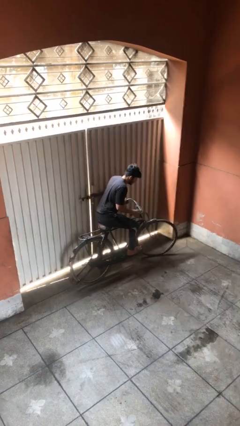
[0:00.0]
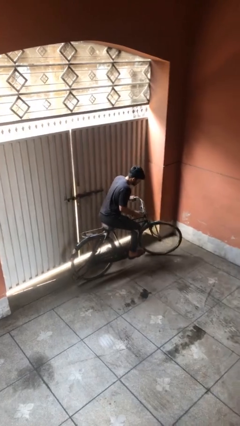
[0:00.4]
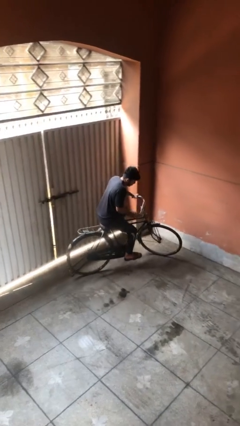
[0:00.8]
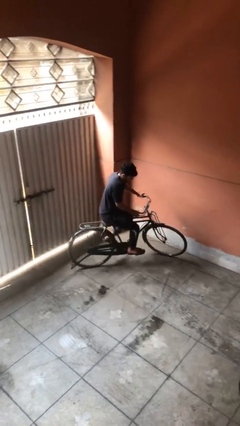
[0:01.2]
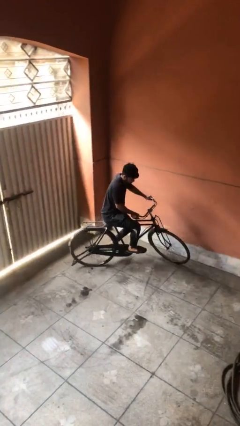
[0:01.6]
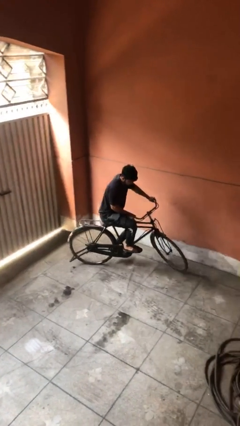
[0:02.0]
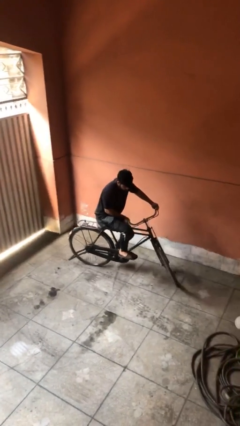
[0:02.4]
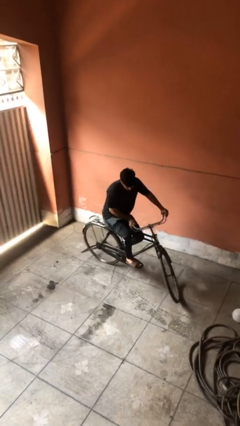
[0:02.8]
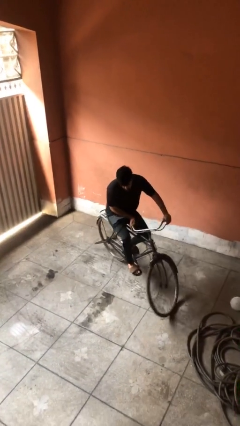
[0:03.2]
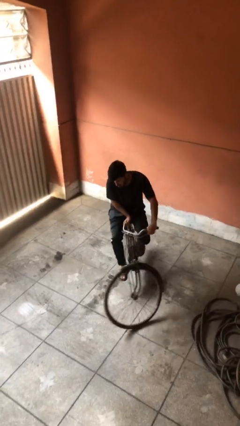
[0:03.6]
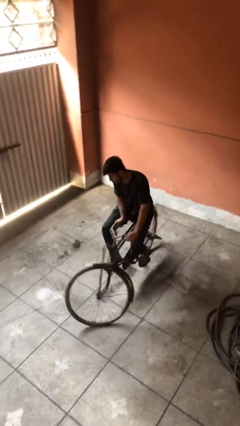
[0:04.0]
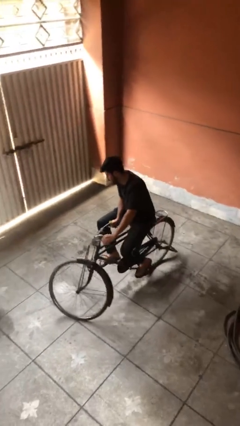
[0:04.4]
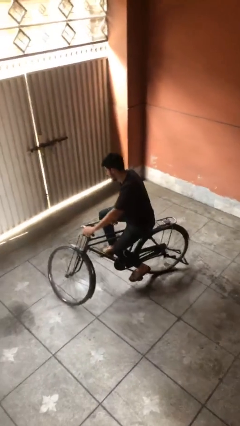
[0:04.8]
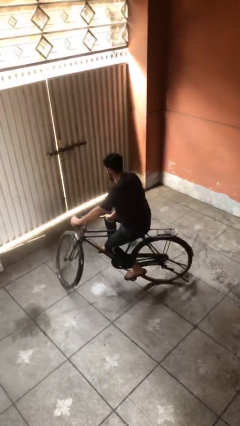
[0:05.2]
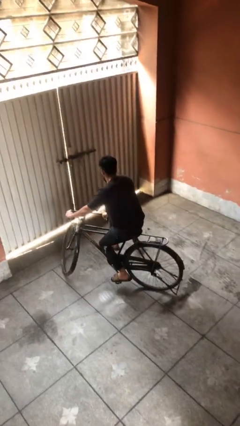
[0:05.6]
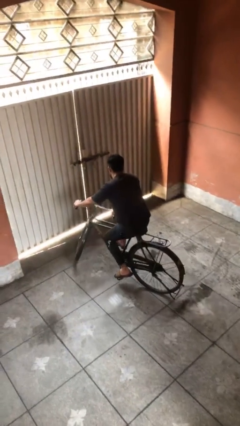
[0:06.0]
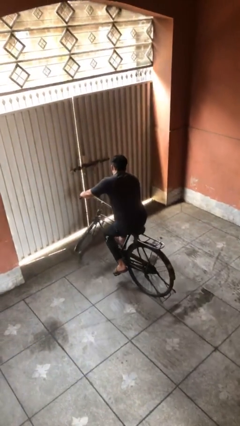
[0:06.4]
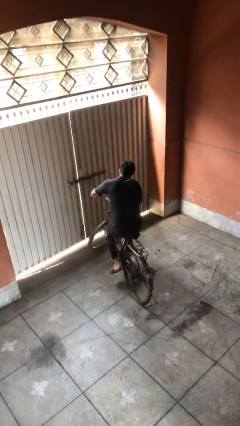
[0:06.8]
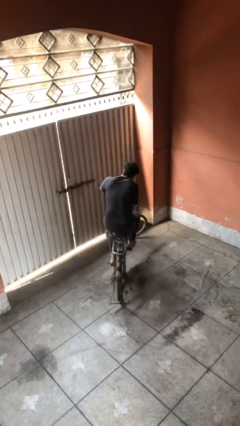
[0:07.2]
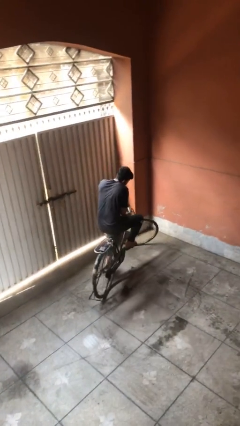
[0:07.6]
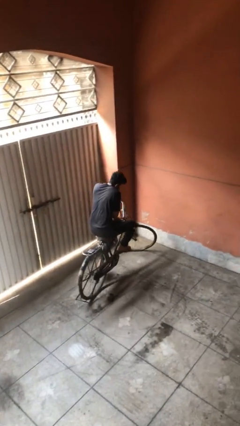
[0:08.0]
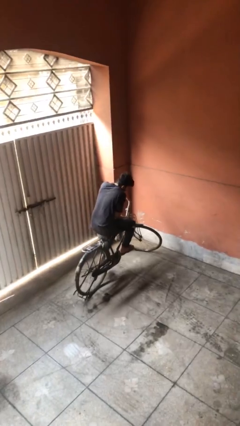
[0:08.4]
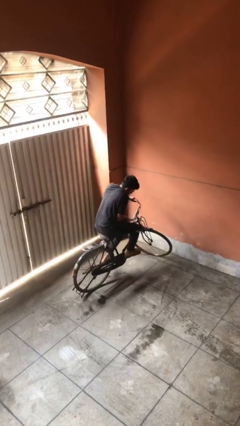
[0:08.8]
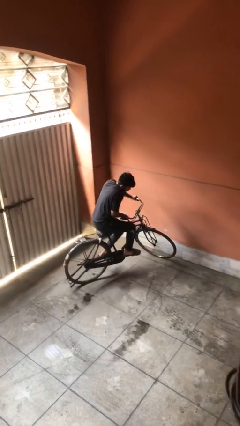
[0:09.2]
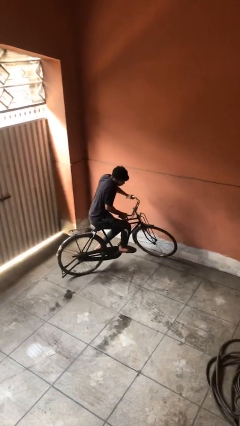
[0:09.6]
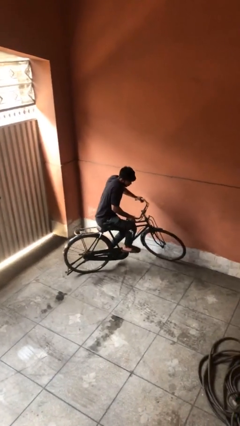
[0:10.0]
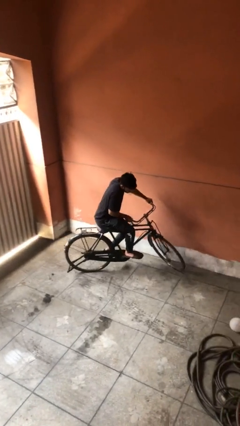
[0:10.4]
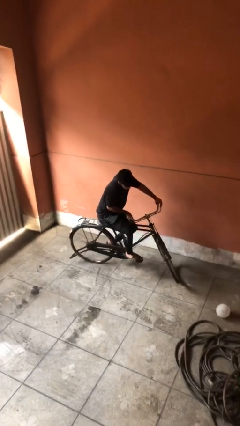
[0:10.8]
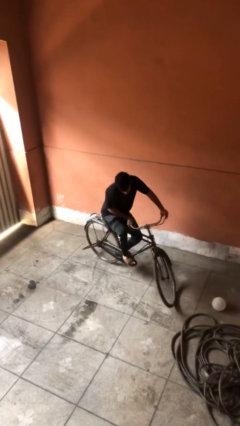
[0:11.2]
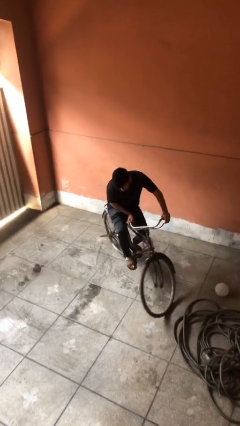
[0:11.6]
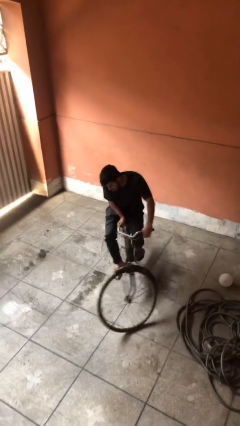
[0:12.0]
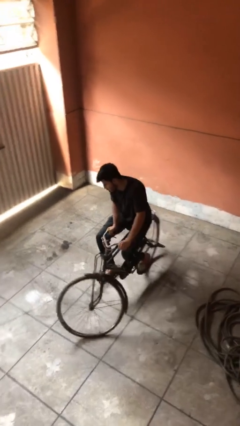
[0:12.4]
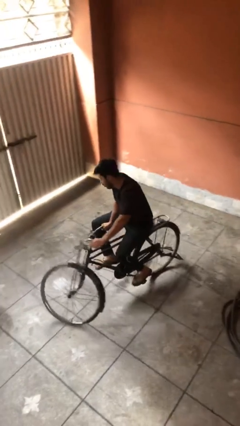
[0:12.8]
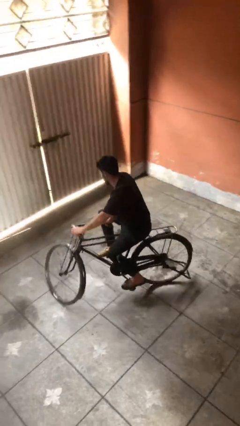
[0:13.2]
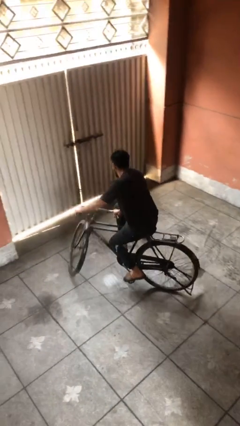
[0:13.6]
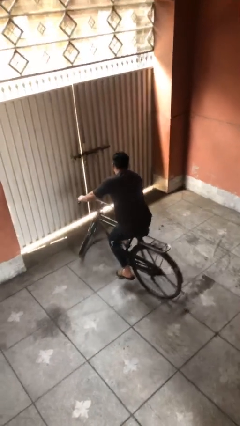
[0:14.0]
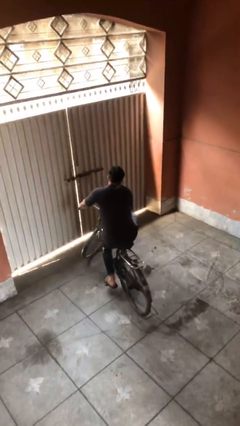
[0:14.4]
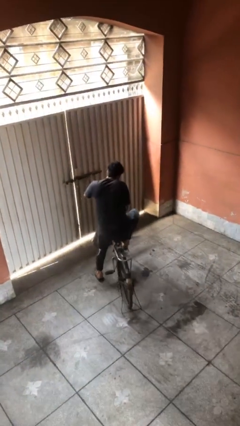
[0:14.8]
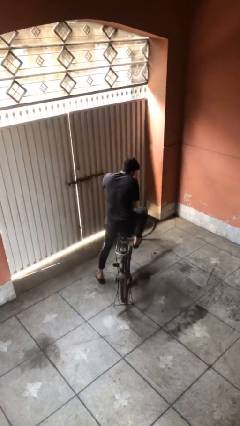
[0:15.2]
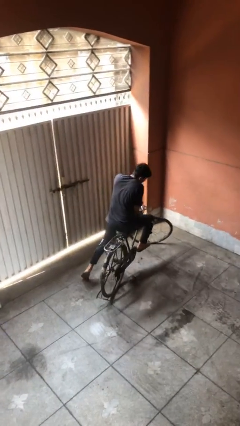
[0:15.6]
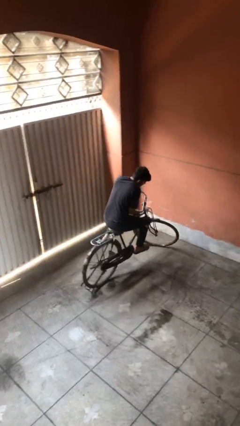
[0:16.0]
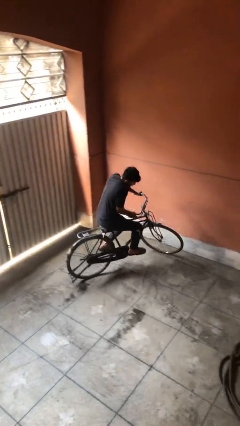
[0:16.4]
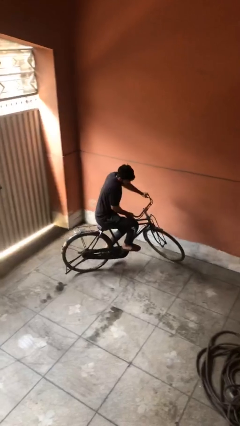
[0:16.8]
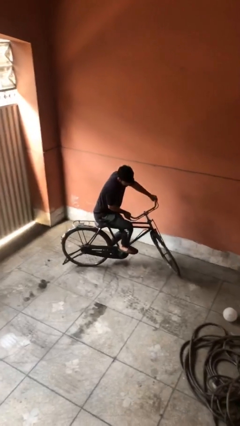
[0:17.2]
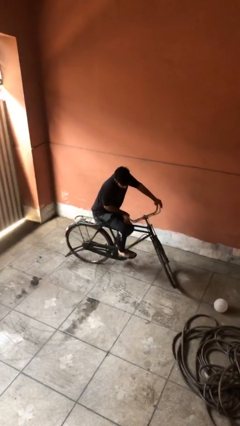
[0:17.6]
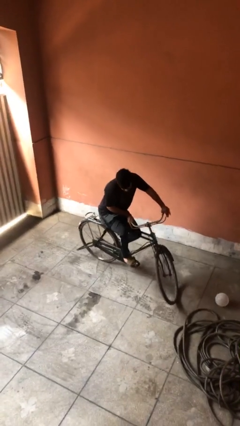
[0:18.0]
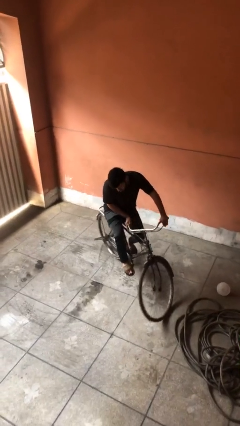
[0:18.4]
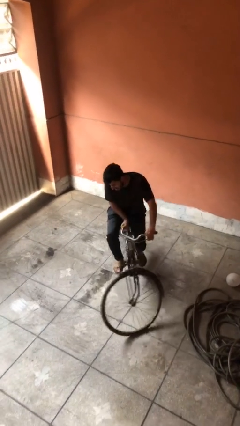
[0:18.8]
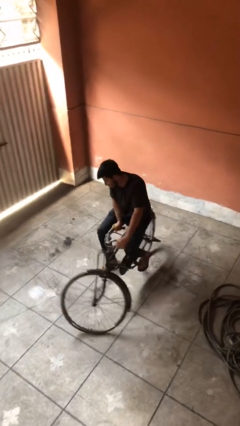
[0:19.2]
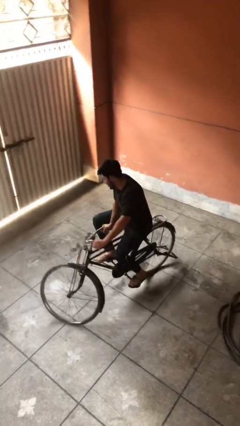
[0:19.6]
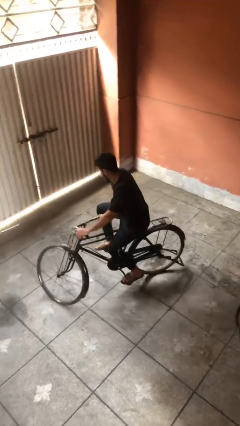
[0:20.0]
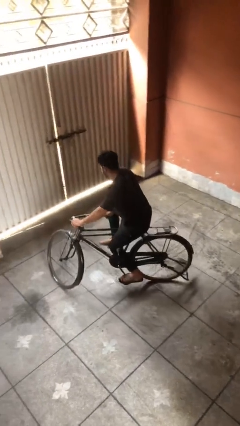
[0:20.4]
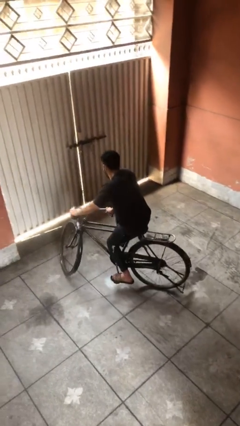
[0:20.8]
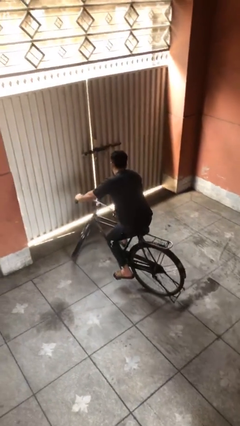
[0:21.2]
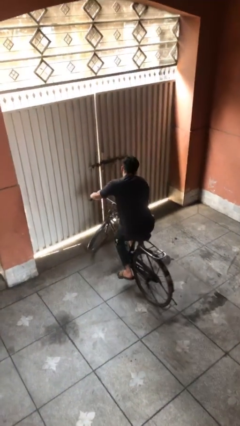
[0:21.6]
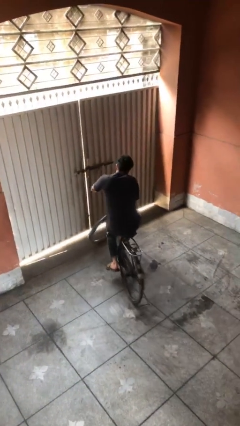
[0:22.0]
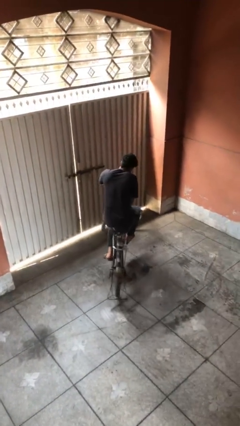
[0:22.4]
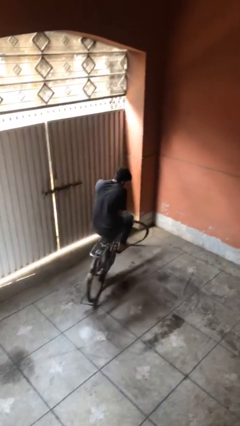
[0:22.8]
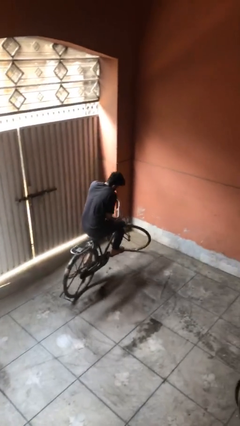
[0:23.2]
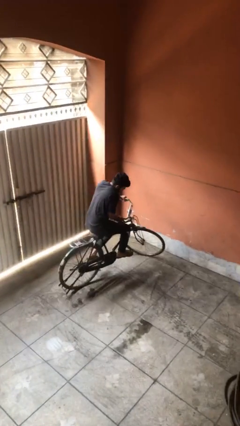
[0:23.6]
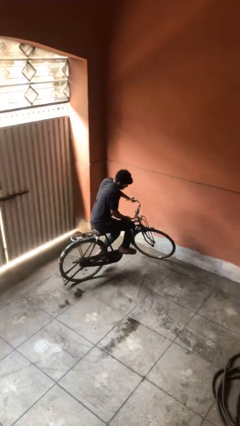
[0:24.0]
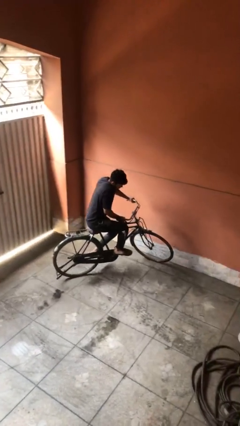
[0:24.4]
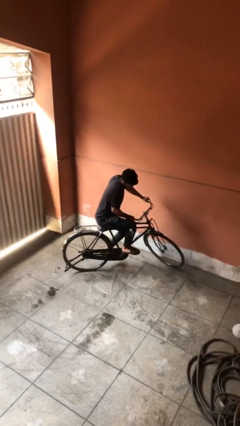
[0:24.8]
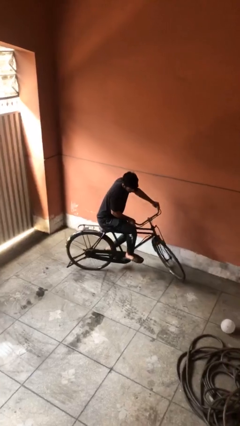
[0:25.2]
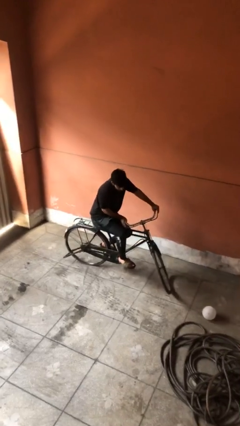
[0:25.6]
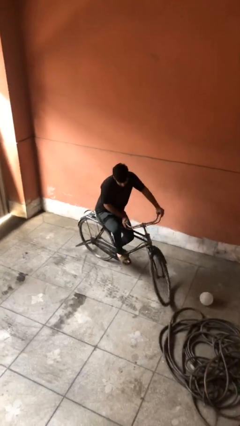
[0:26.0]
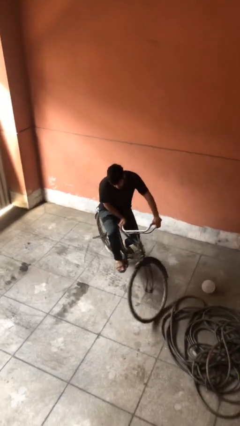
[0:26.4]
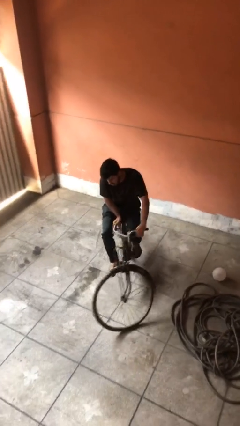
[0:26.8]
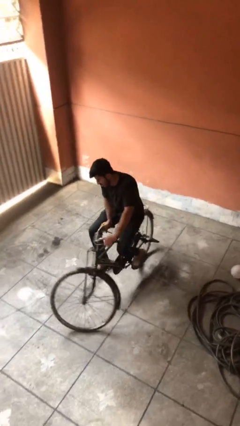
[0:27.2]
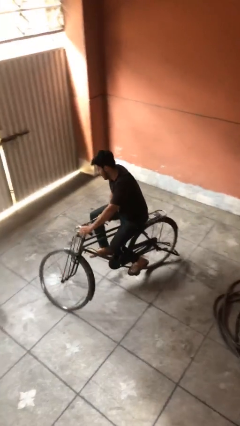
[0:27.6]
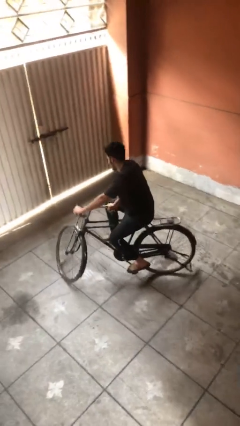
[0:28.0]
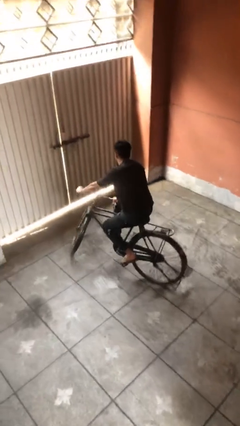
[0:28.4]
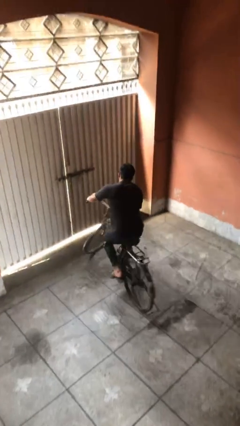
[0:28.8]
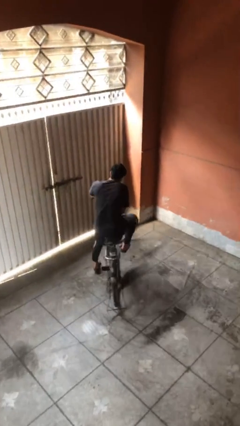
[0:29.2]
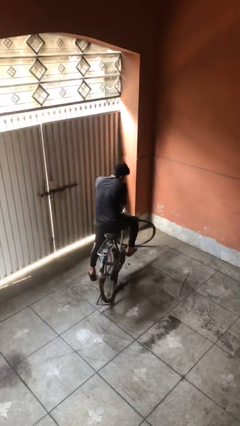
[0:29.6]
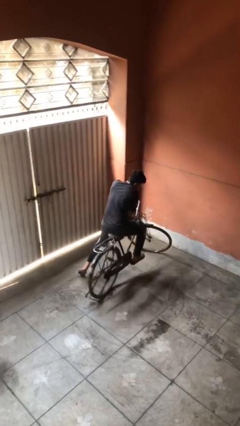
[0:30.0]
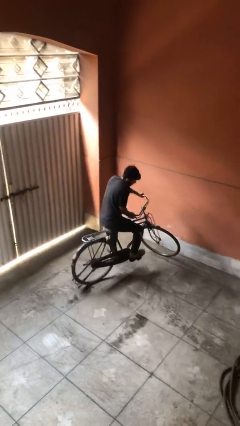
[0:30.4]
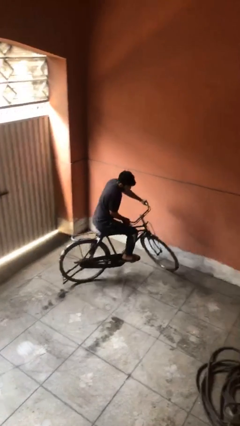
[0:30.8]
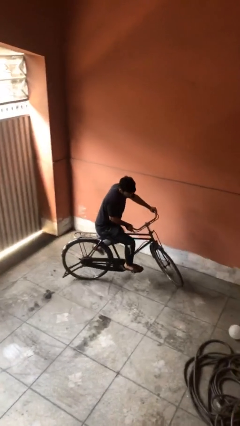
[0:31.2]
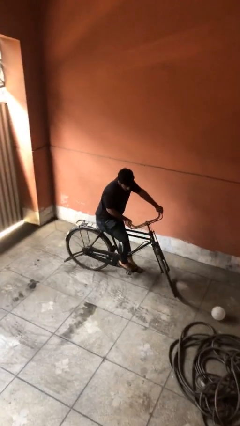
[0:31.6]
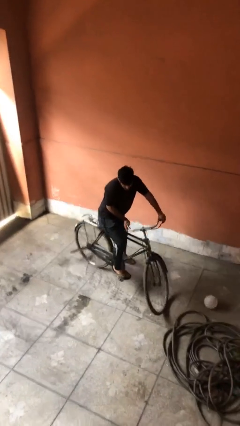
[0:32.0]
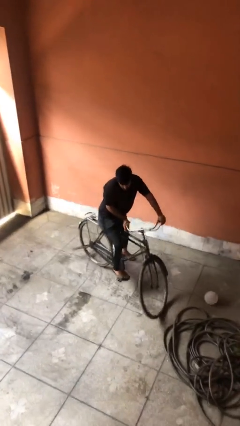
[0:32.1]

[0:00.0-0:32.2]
person rides bicycle

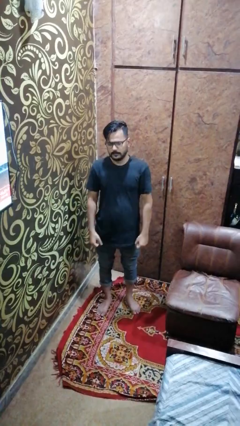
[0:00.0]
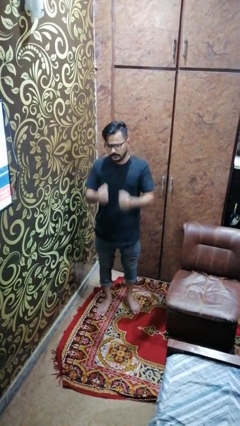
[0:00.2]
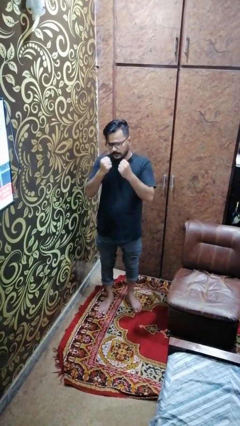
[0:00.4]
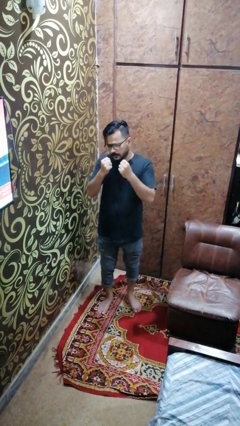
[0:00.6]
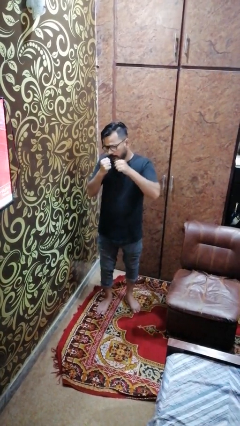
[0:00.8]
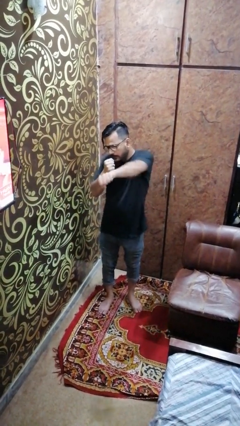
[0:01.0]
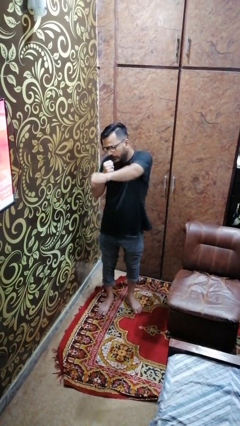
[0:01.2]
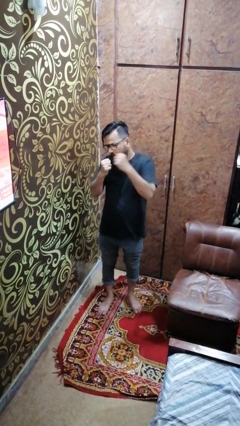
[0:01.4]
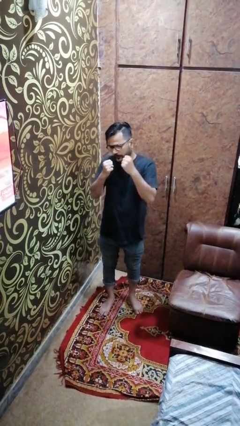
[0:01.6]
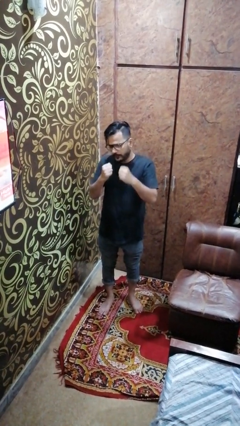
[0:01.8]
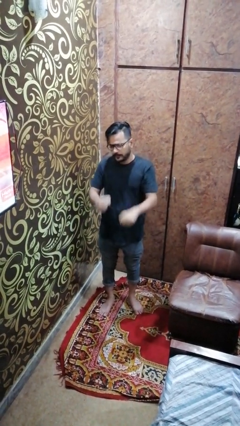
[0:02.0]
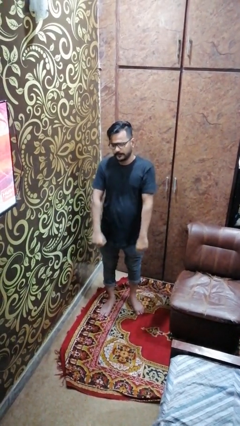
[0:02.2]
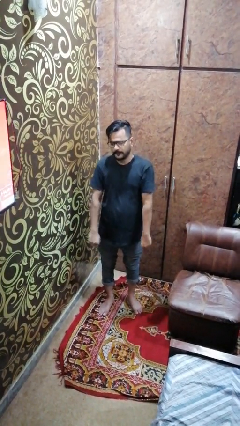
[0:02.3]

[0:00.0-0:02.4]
person punches

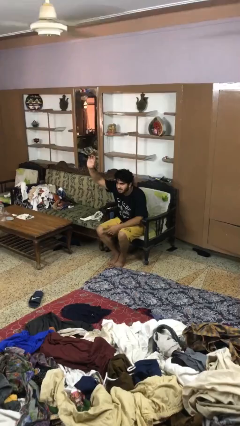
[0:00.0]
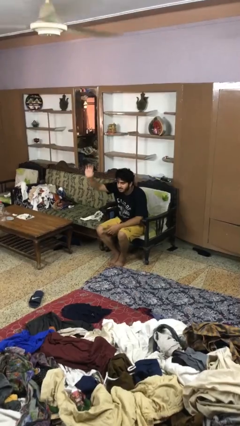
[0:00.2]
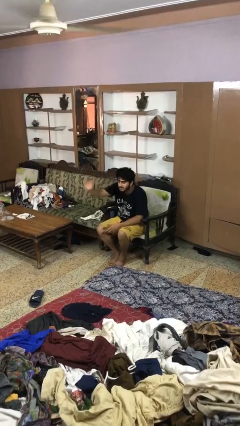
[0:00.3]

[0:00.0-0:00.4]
person gestures lower hand
